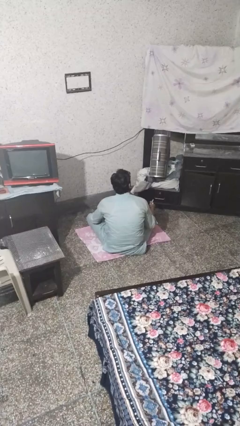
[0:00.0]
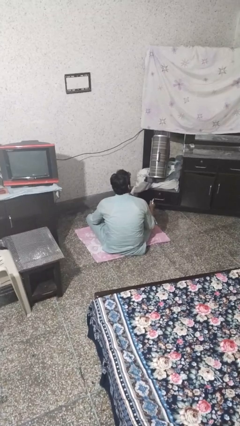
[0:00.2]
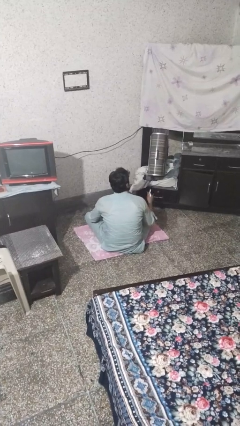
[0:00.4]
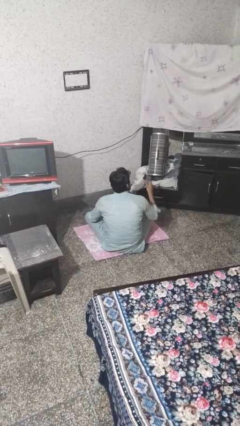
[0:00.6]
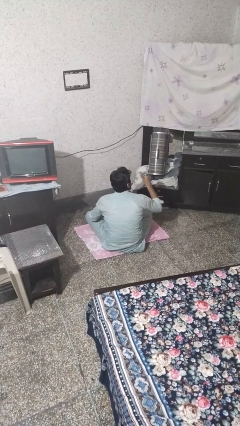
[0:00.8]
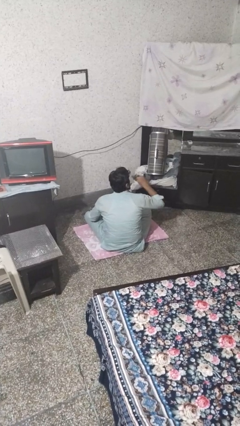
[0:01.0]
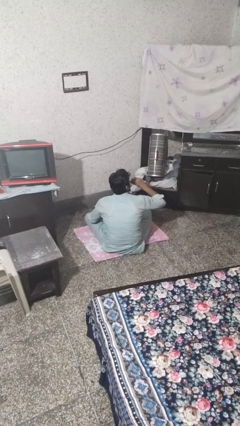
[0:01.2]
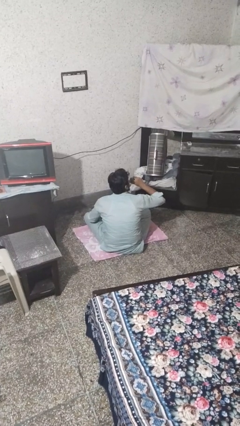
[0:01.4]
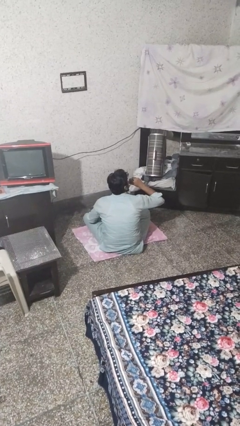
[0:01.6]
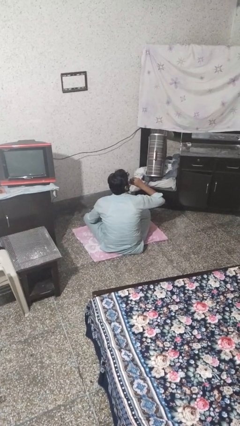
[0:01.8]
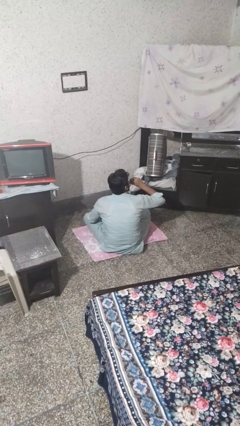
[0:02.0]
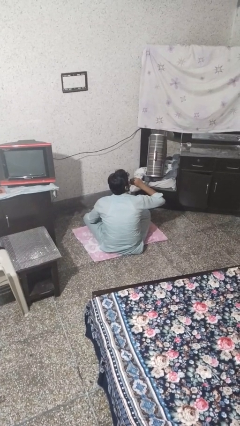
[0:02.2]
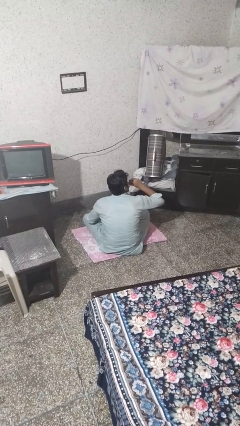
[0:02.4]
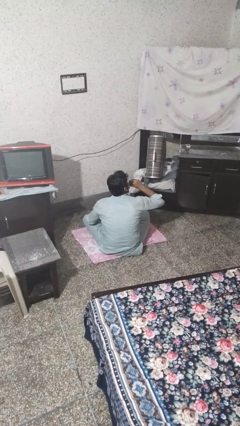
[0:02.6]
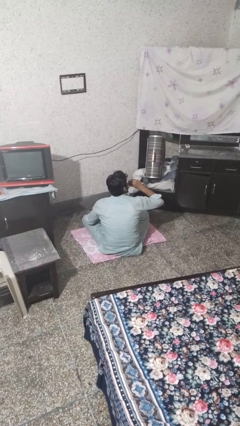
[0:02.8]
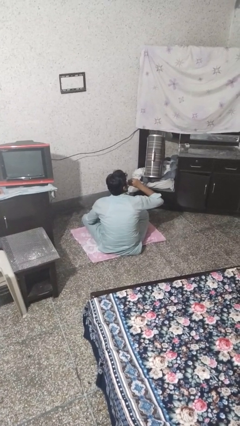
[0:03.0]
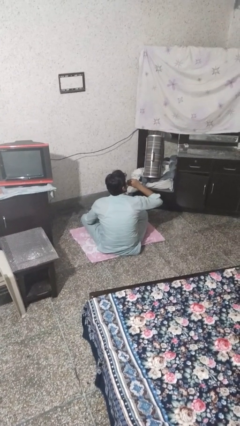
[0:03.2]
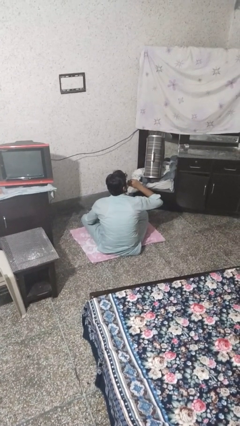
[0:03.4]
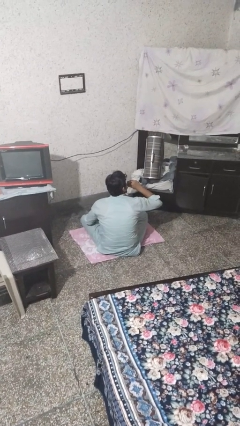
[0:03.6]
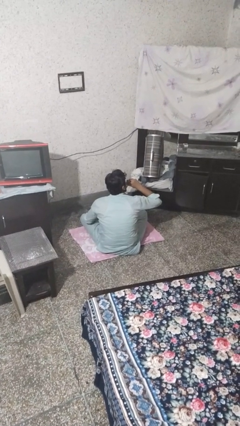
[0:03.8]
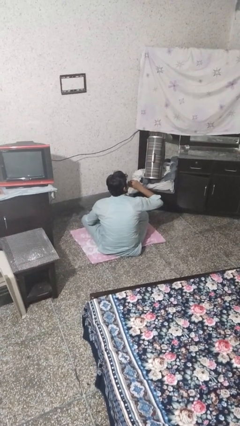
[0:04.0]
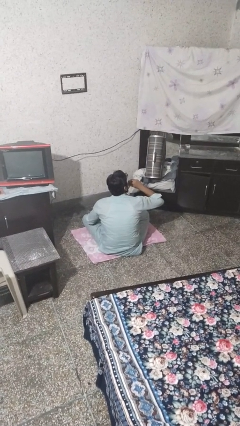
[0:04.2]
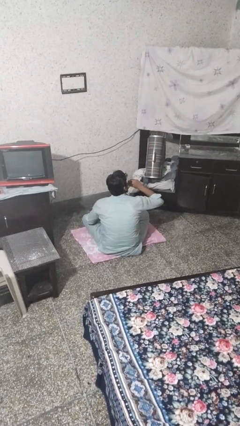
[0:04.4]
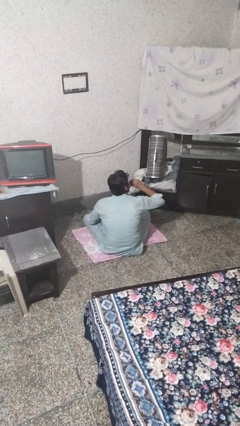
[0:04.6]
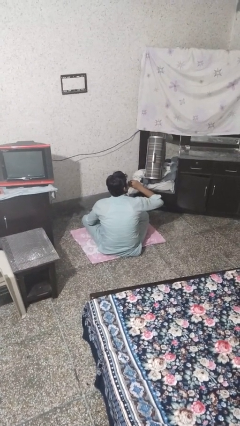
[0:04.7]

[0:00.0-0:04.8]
person vapes

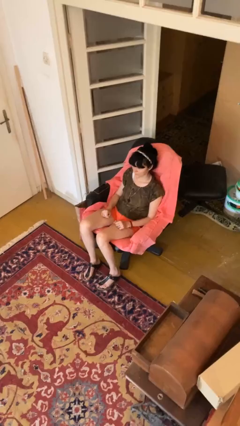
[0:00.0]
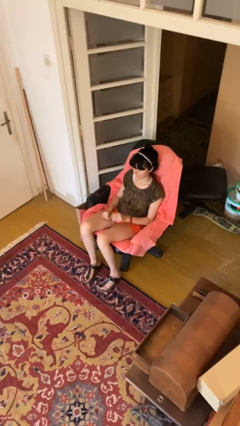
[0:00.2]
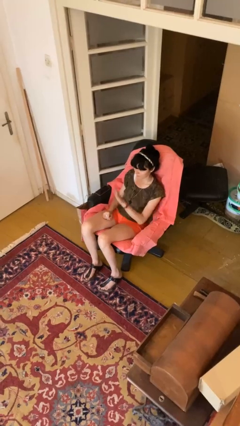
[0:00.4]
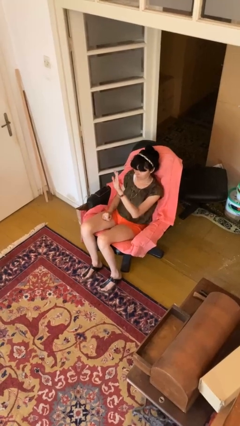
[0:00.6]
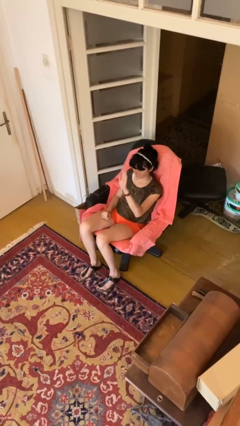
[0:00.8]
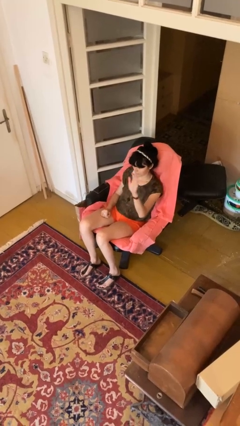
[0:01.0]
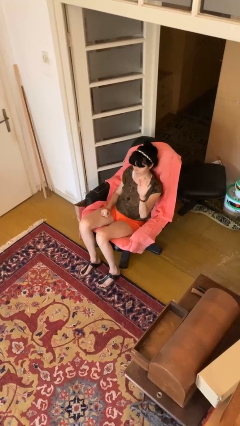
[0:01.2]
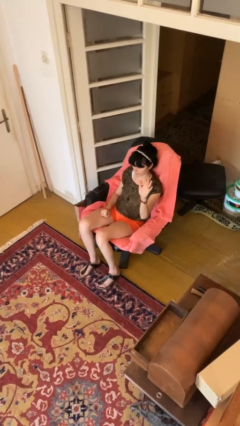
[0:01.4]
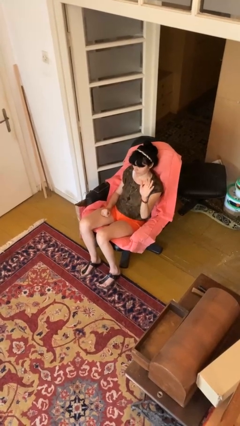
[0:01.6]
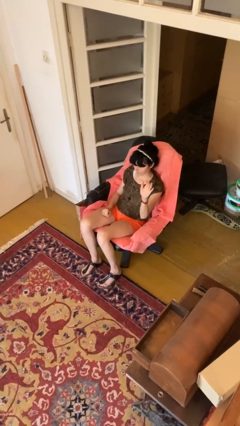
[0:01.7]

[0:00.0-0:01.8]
person gestures swipe left

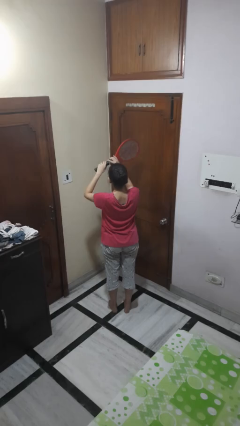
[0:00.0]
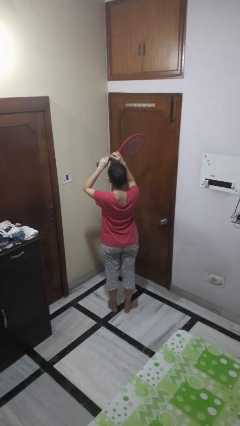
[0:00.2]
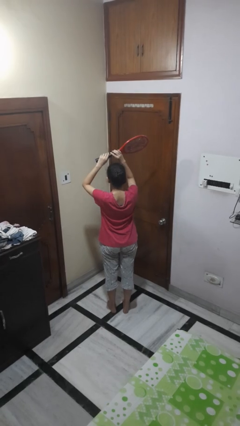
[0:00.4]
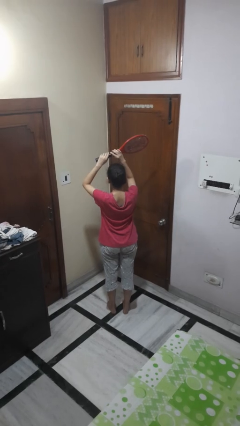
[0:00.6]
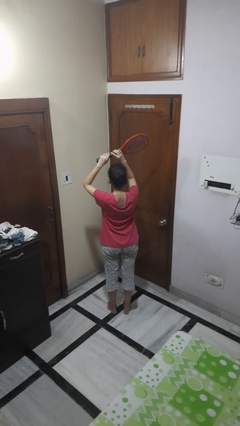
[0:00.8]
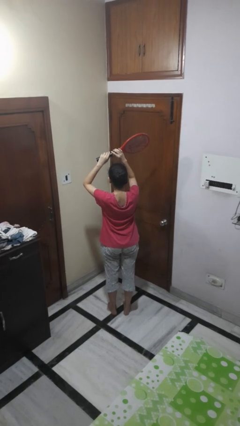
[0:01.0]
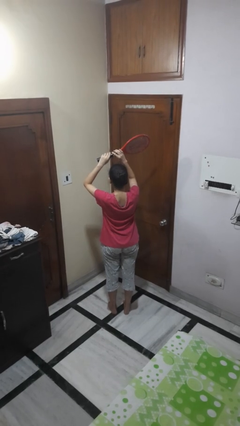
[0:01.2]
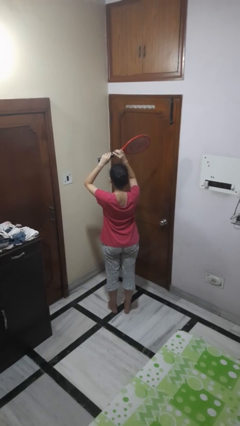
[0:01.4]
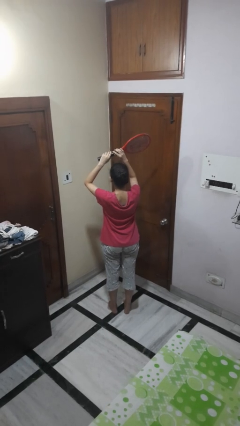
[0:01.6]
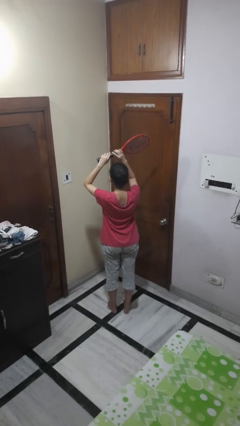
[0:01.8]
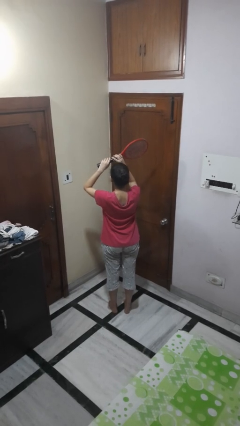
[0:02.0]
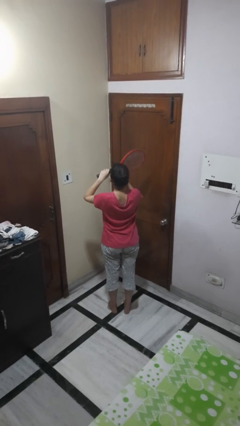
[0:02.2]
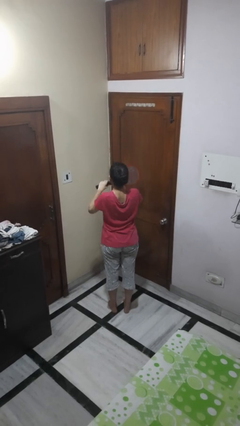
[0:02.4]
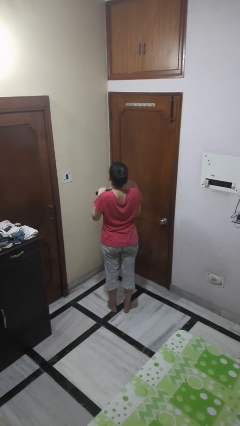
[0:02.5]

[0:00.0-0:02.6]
person holds object above head

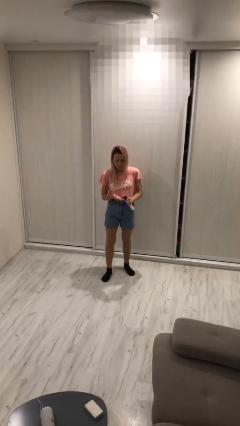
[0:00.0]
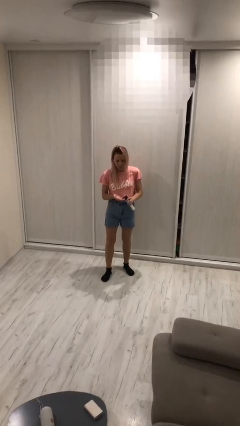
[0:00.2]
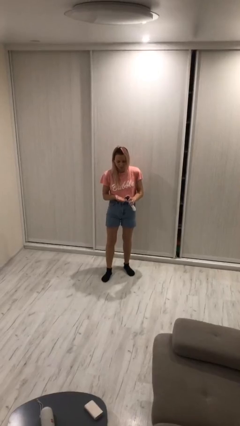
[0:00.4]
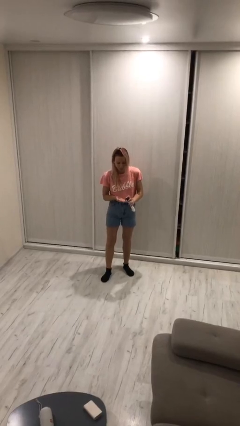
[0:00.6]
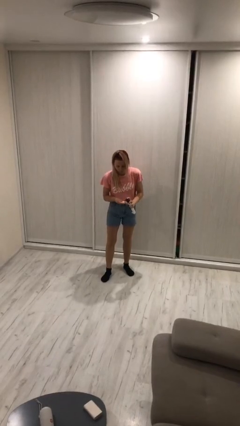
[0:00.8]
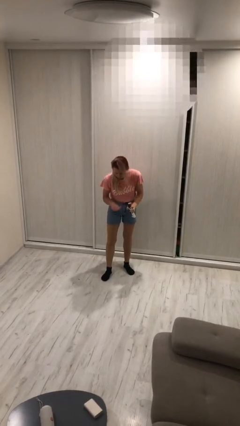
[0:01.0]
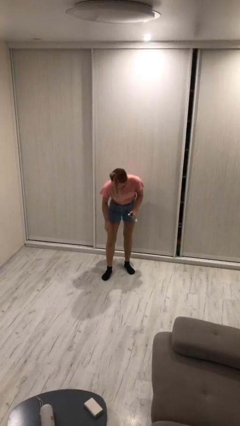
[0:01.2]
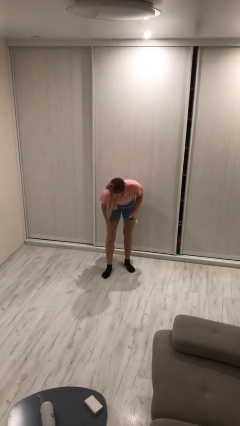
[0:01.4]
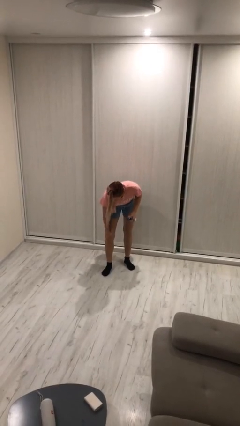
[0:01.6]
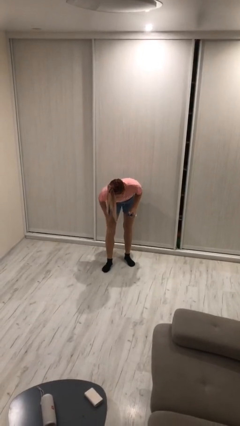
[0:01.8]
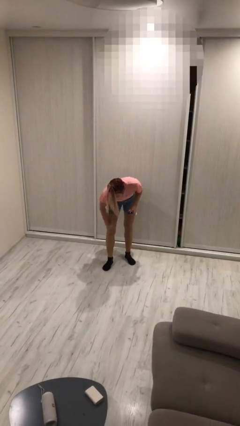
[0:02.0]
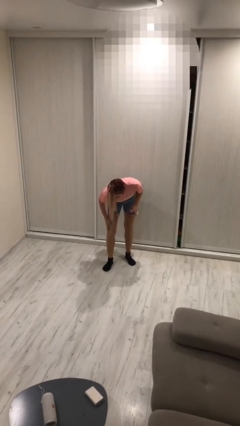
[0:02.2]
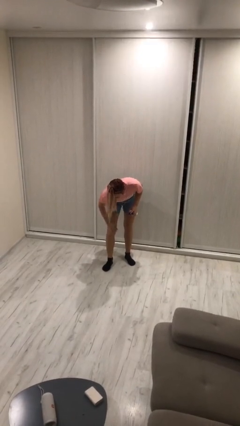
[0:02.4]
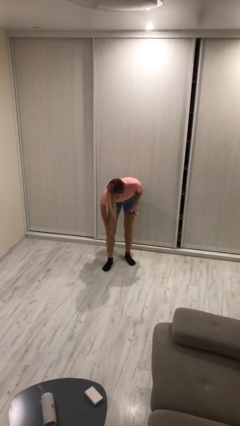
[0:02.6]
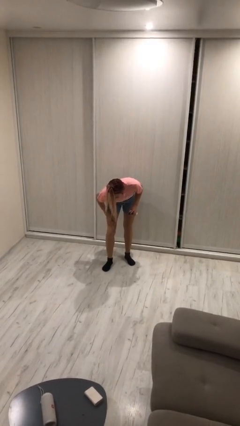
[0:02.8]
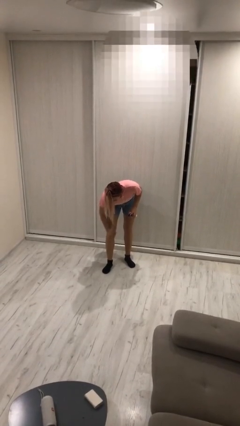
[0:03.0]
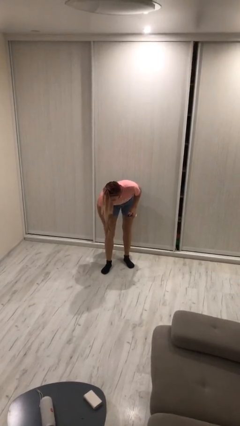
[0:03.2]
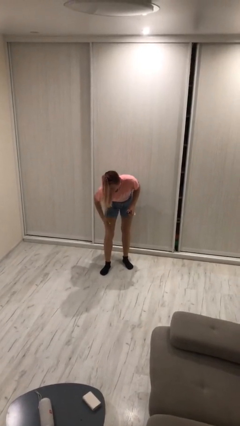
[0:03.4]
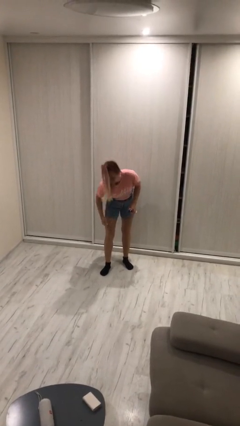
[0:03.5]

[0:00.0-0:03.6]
person applies sunscreen

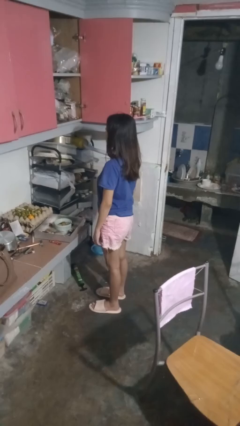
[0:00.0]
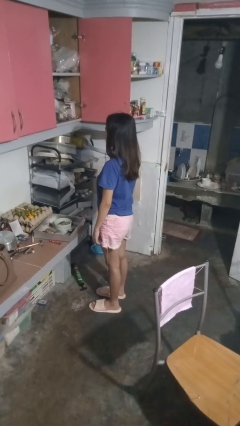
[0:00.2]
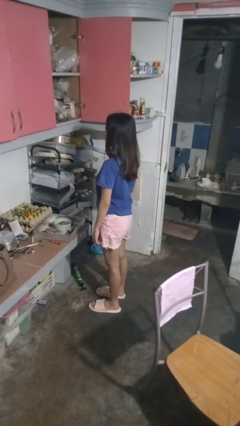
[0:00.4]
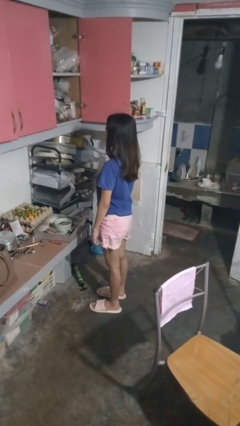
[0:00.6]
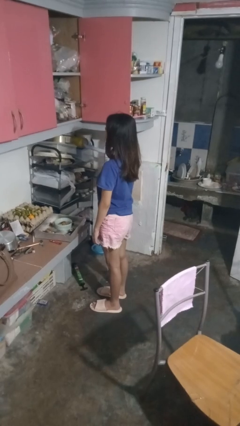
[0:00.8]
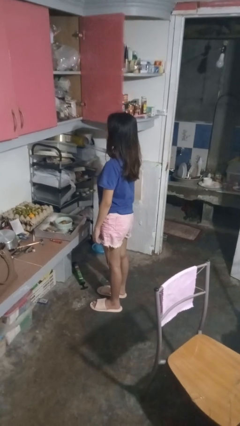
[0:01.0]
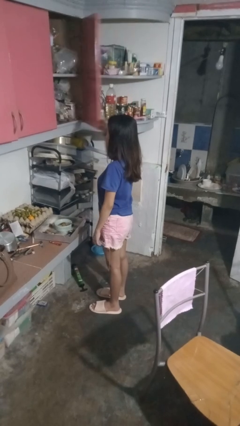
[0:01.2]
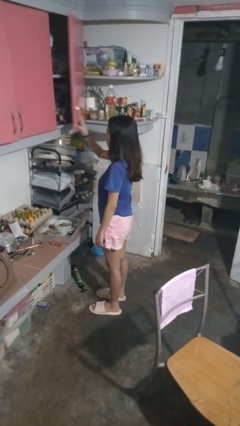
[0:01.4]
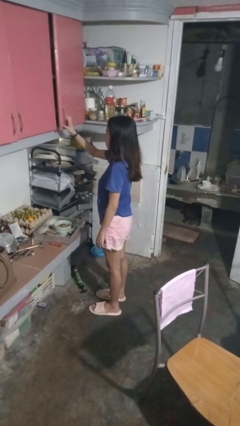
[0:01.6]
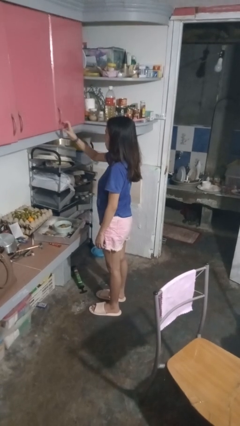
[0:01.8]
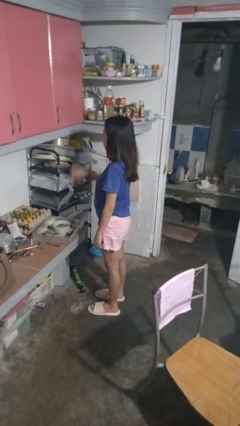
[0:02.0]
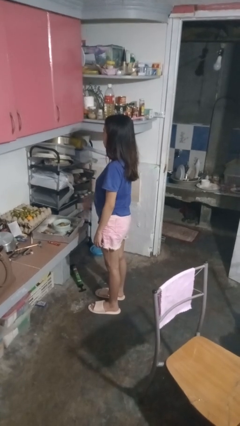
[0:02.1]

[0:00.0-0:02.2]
person closes cabinet

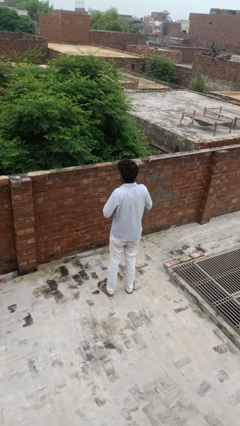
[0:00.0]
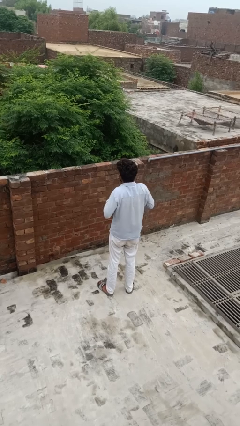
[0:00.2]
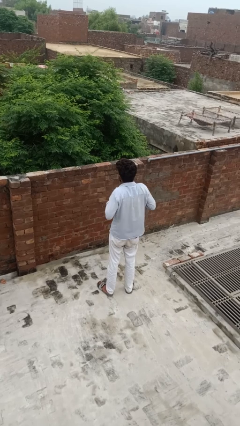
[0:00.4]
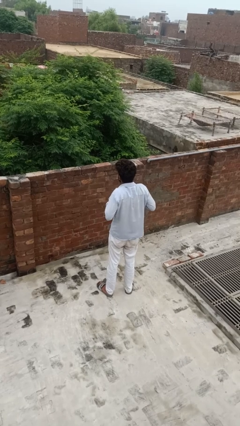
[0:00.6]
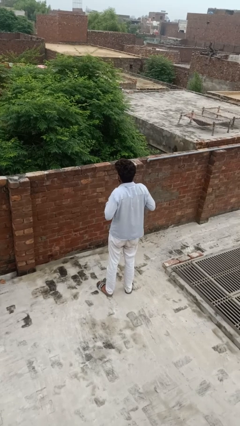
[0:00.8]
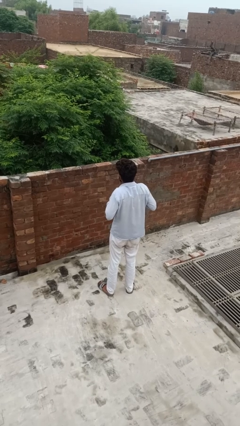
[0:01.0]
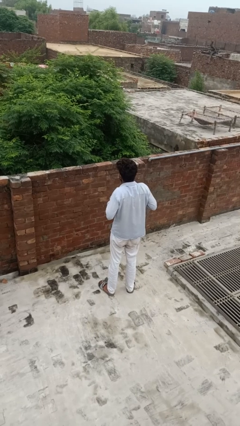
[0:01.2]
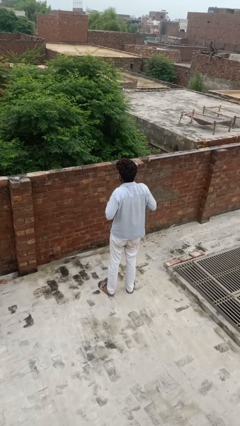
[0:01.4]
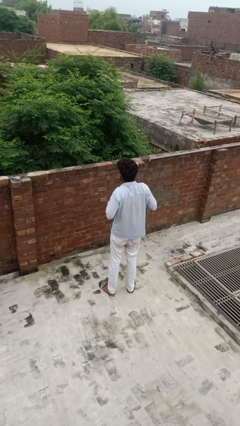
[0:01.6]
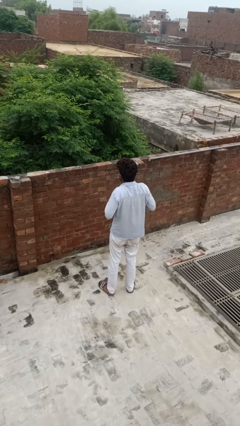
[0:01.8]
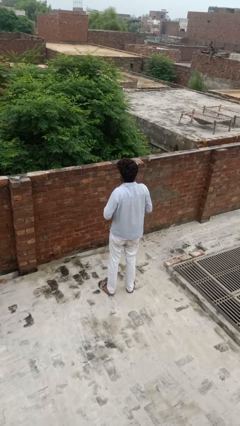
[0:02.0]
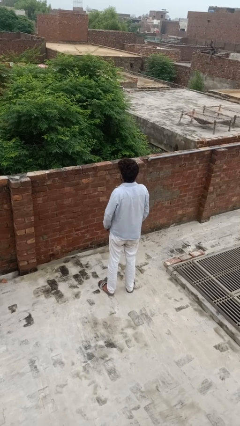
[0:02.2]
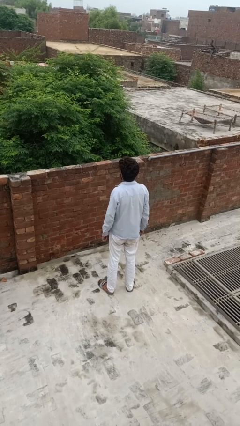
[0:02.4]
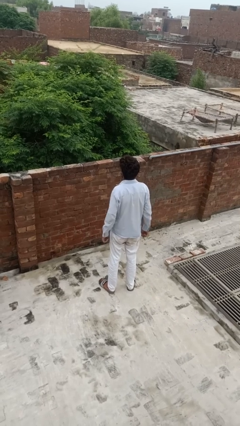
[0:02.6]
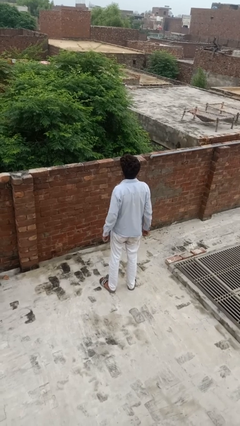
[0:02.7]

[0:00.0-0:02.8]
person cracks knuckles
